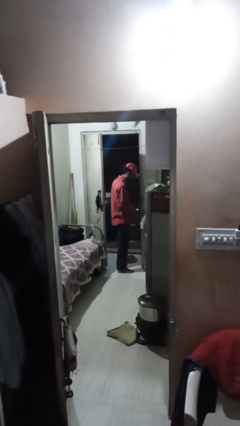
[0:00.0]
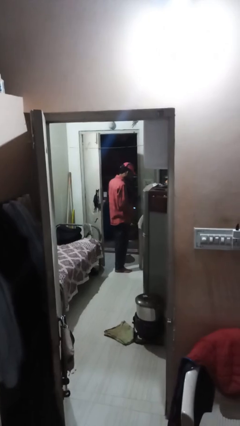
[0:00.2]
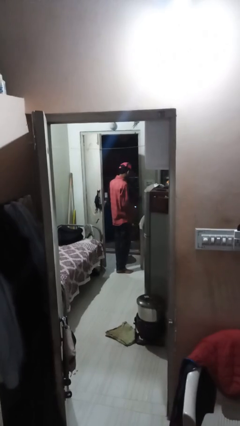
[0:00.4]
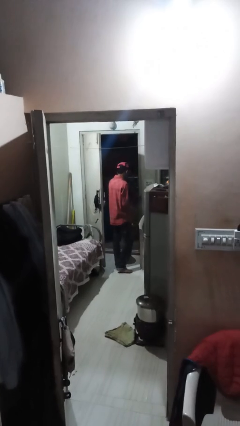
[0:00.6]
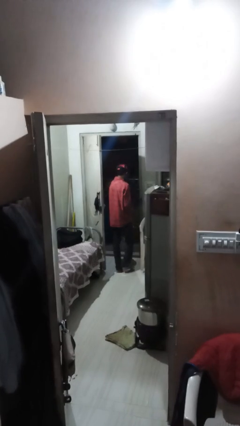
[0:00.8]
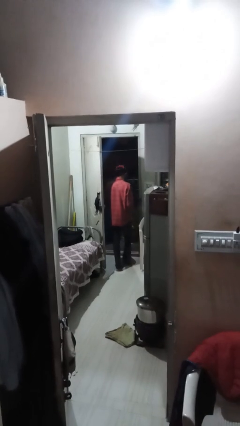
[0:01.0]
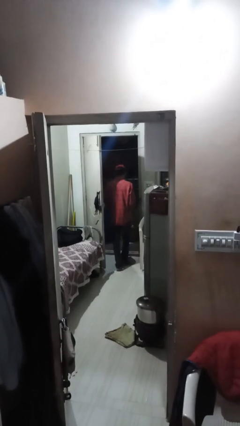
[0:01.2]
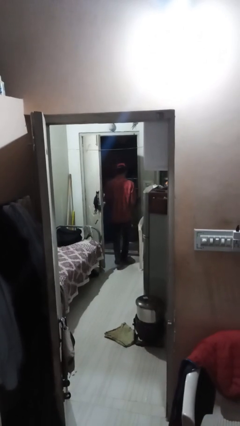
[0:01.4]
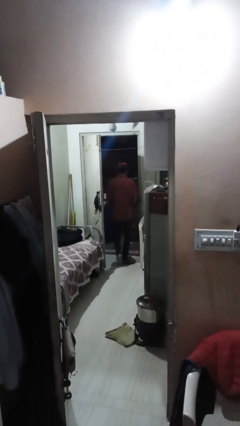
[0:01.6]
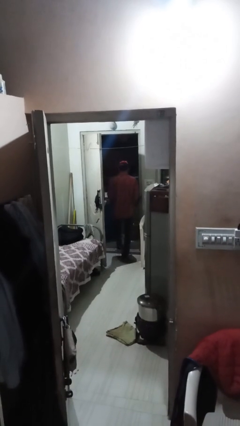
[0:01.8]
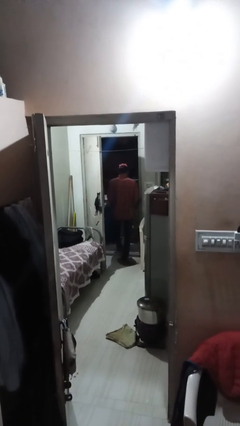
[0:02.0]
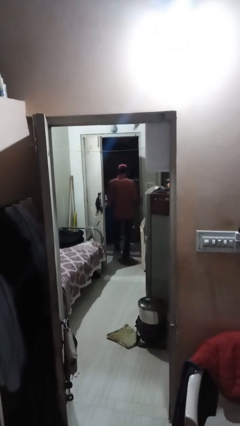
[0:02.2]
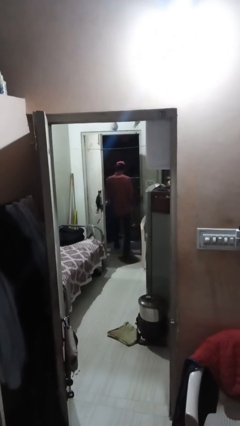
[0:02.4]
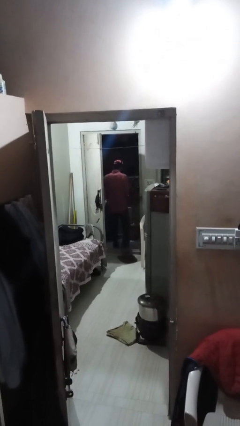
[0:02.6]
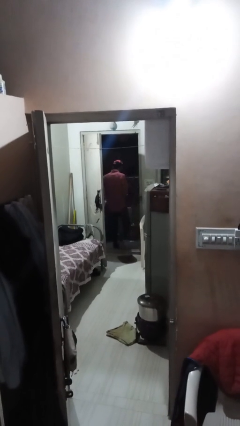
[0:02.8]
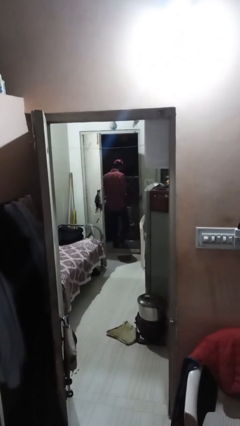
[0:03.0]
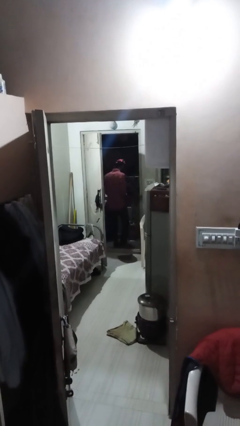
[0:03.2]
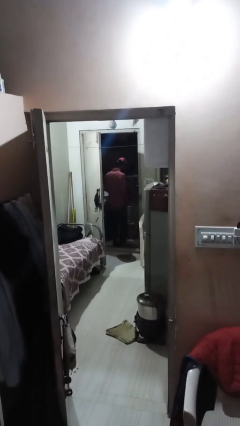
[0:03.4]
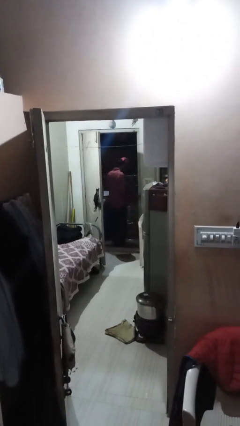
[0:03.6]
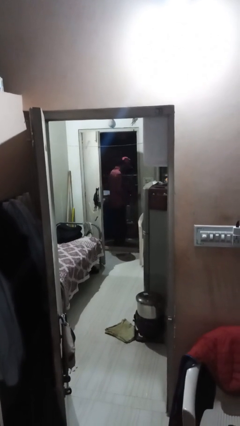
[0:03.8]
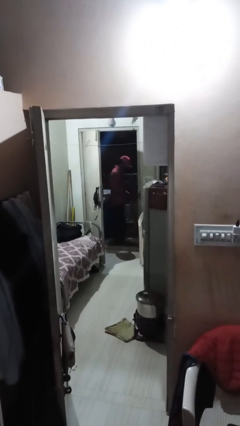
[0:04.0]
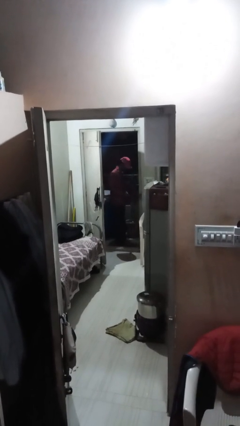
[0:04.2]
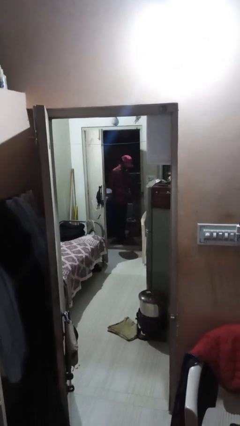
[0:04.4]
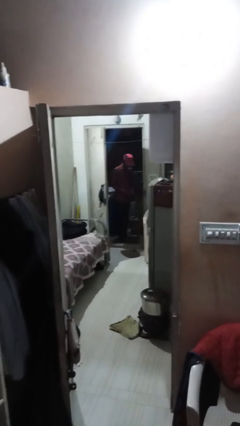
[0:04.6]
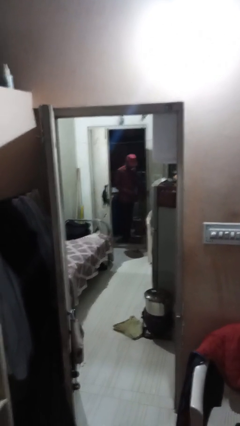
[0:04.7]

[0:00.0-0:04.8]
person exits scene through structure

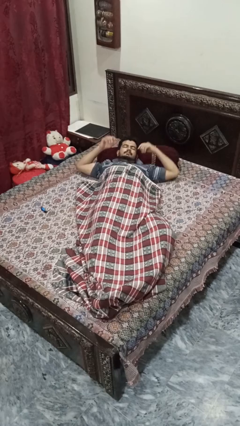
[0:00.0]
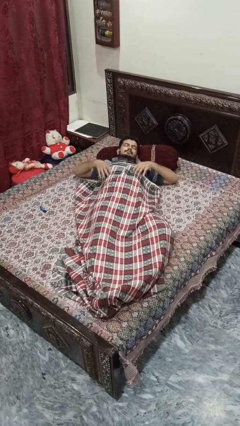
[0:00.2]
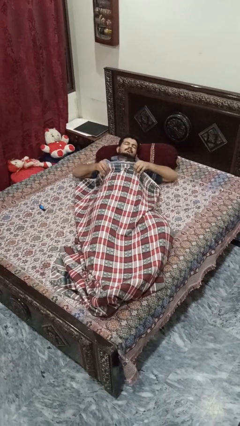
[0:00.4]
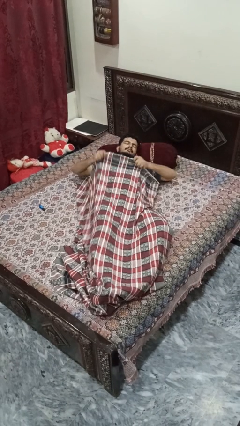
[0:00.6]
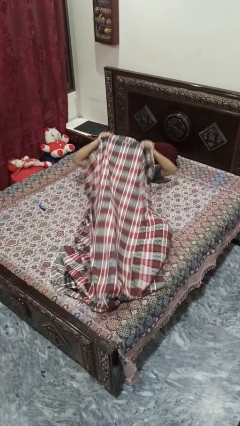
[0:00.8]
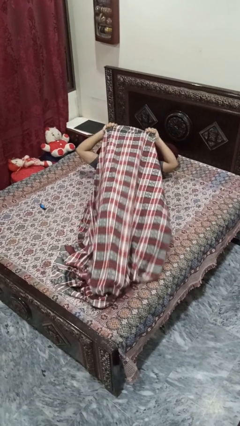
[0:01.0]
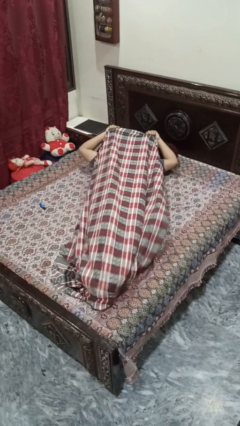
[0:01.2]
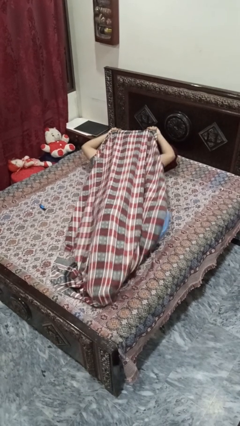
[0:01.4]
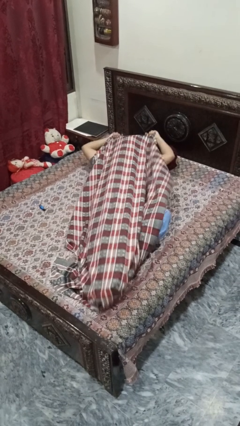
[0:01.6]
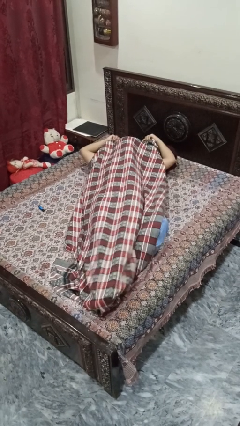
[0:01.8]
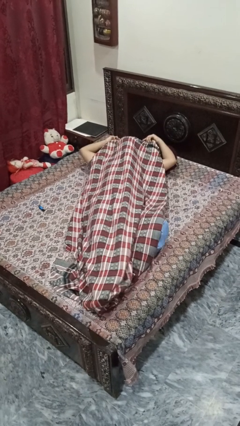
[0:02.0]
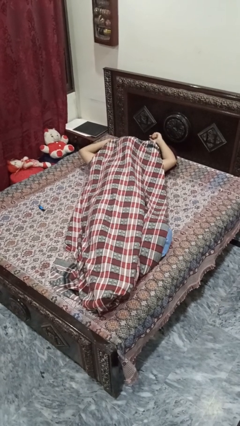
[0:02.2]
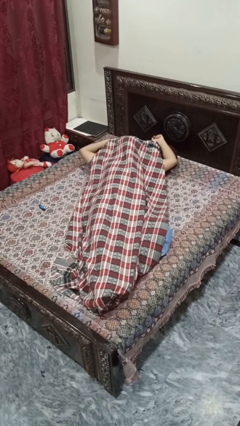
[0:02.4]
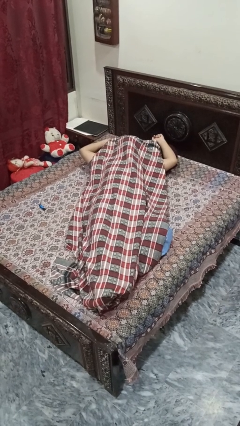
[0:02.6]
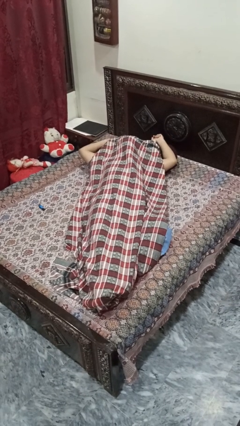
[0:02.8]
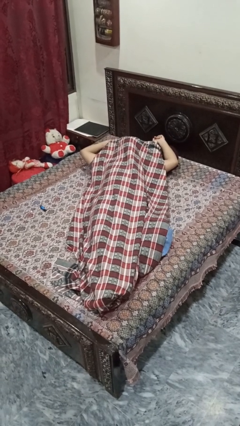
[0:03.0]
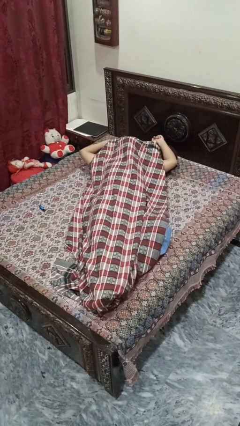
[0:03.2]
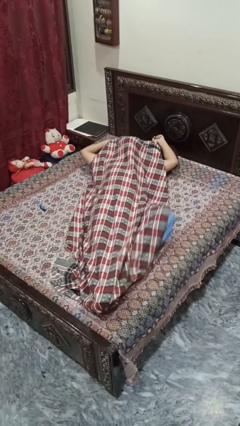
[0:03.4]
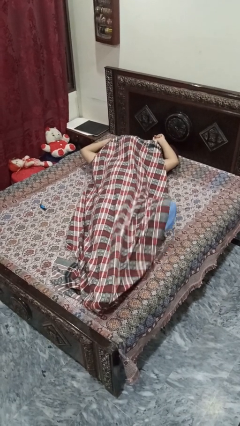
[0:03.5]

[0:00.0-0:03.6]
person covers with bedsheets

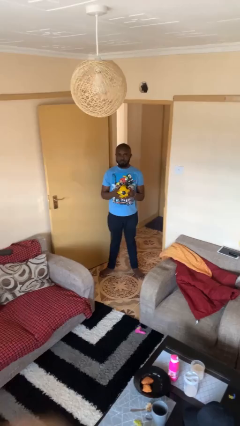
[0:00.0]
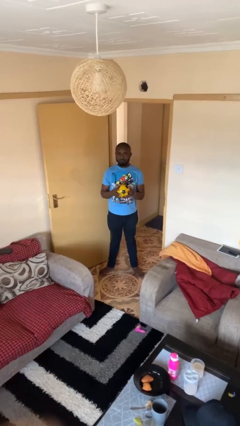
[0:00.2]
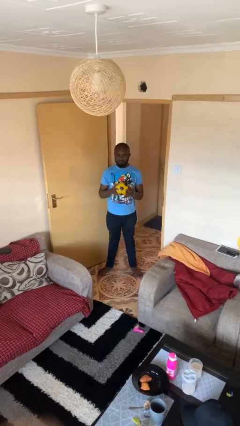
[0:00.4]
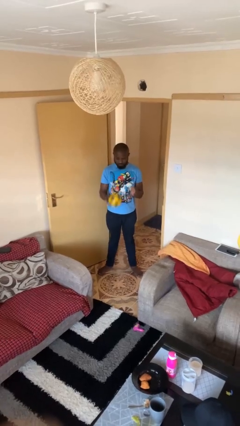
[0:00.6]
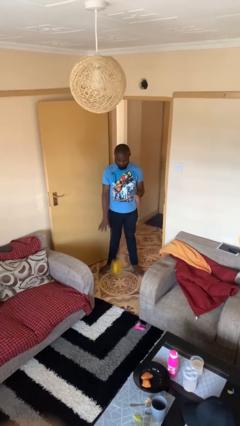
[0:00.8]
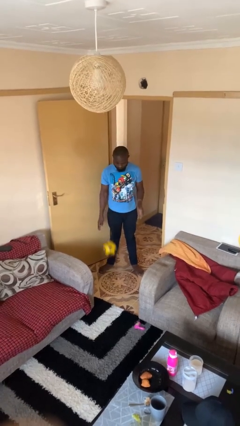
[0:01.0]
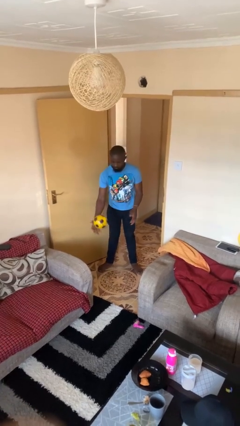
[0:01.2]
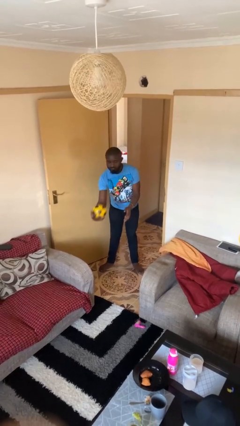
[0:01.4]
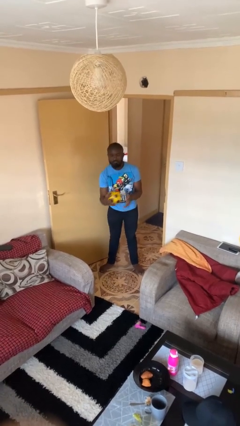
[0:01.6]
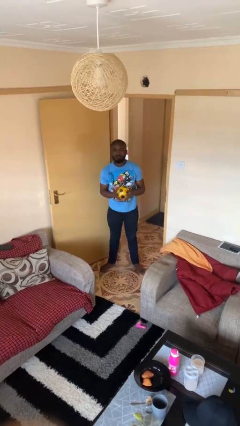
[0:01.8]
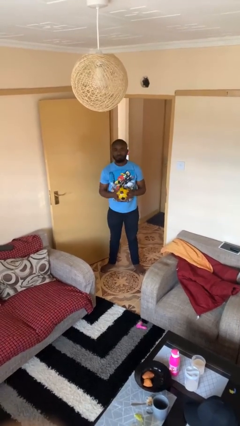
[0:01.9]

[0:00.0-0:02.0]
person bounces ball on floor

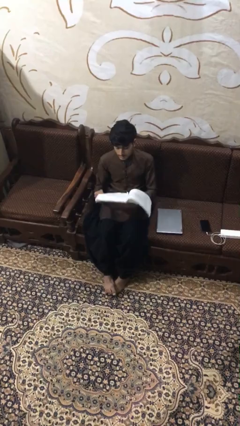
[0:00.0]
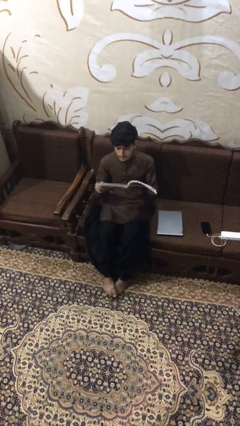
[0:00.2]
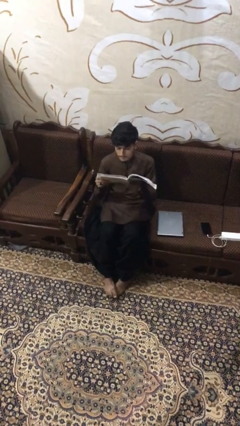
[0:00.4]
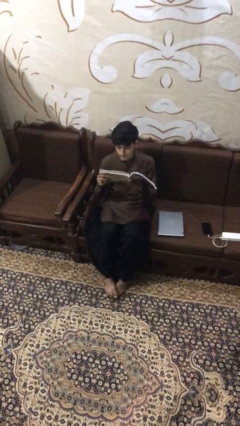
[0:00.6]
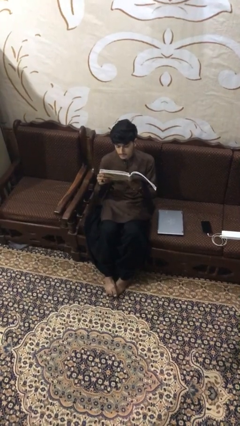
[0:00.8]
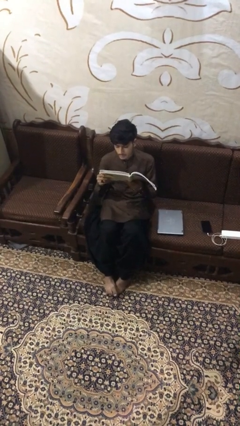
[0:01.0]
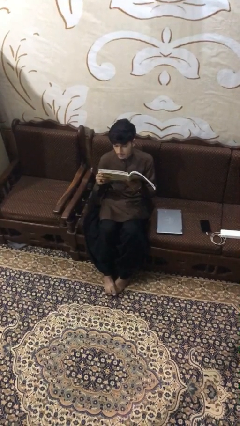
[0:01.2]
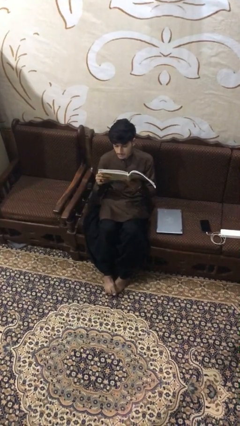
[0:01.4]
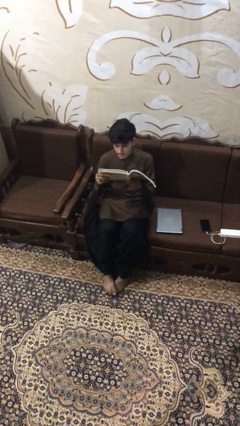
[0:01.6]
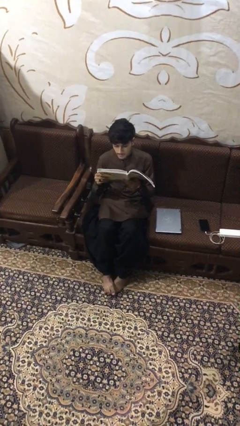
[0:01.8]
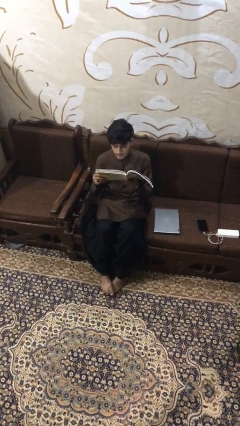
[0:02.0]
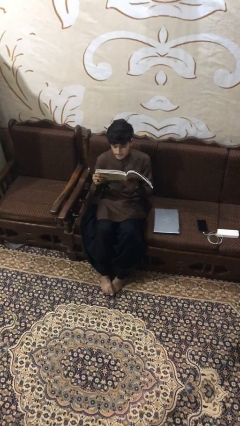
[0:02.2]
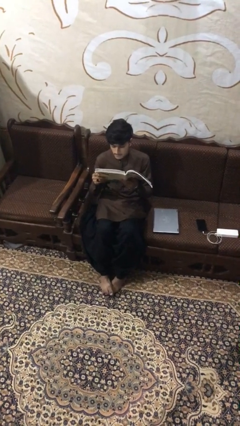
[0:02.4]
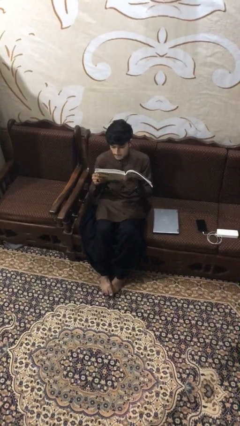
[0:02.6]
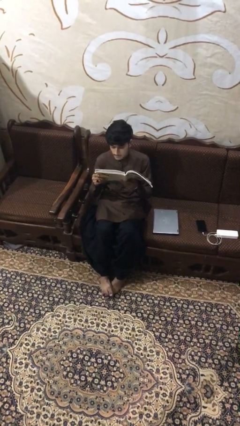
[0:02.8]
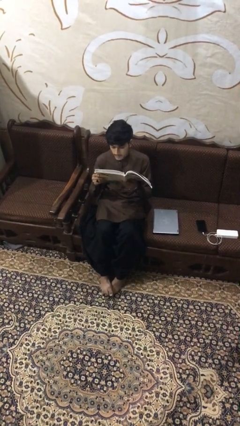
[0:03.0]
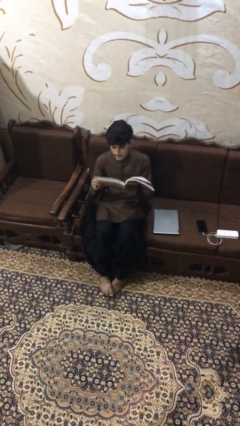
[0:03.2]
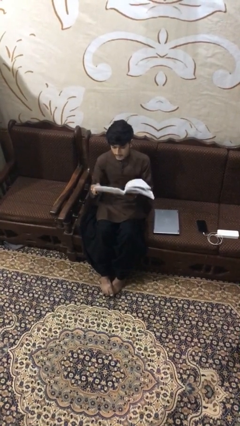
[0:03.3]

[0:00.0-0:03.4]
person reads document

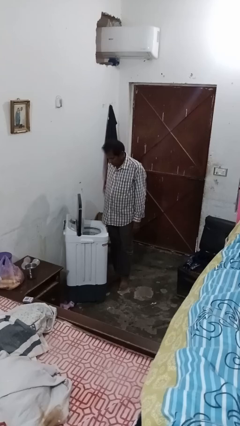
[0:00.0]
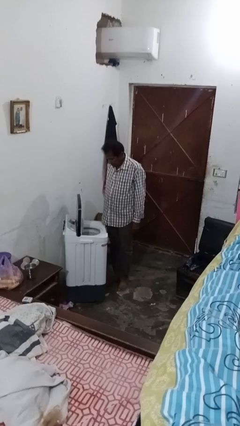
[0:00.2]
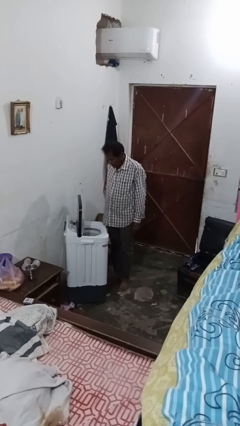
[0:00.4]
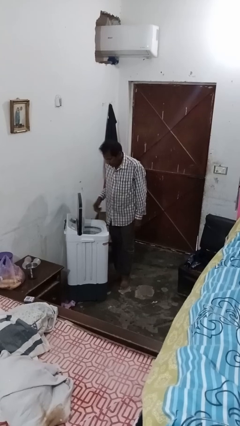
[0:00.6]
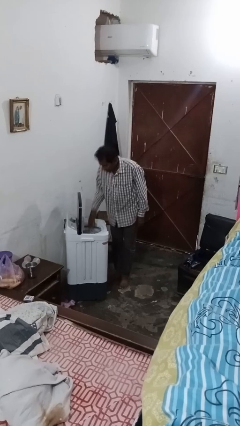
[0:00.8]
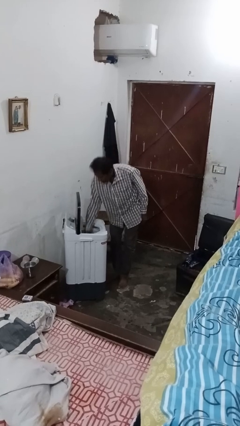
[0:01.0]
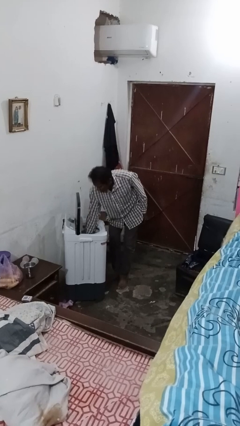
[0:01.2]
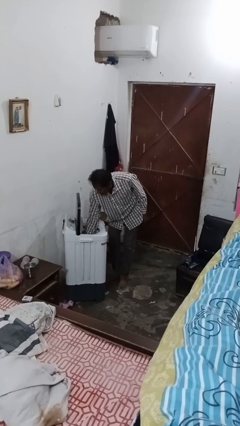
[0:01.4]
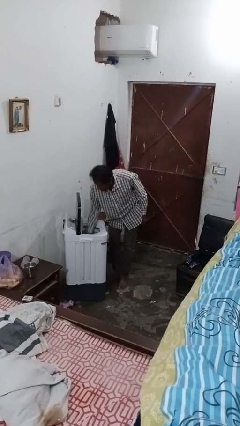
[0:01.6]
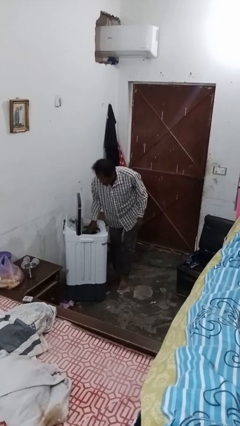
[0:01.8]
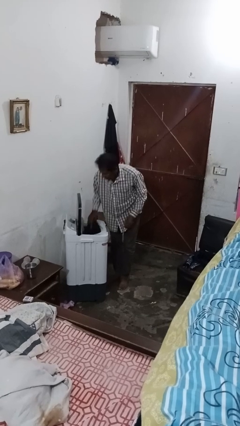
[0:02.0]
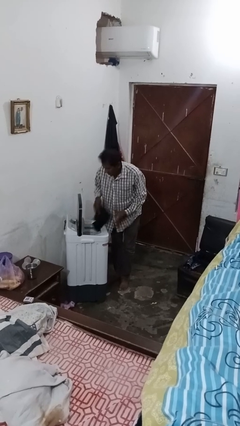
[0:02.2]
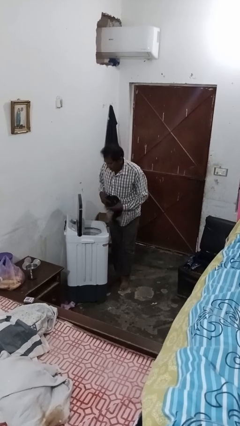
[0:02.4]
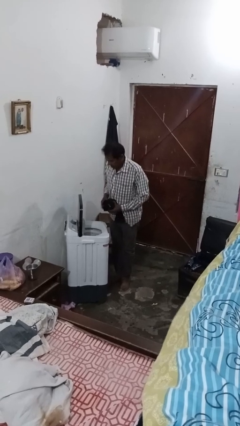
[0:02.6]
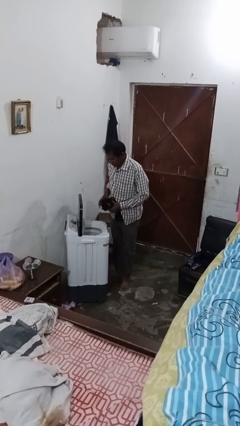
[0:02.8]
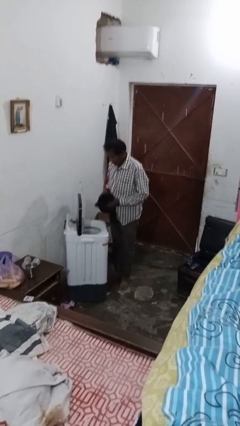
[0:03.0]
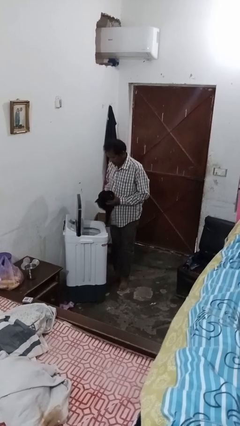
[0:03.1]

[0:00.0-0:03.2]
person unloads clotheswasher

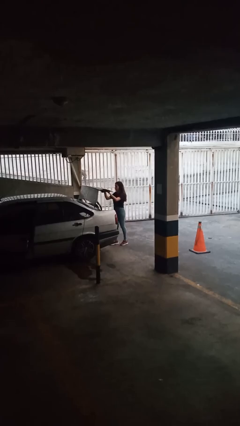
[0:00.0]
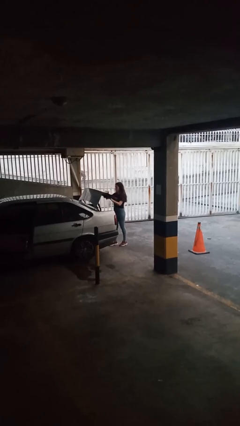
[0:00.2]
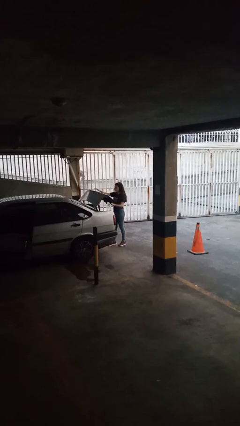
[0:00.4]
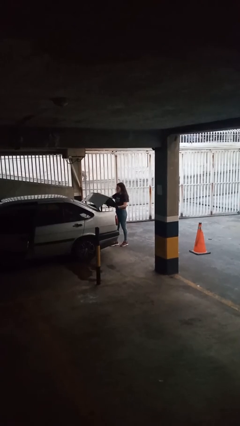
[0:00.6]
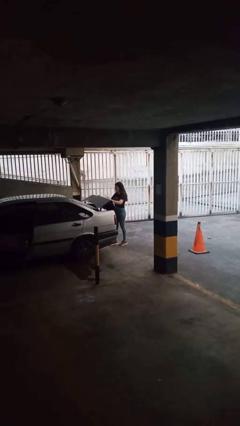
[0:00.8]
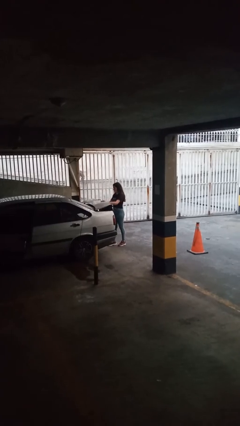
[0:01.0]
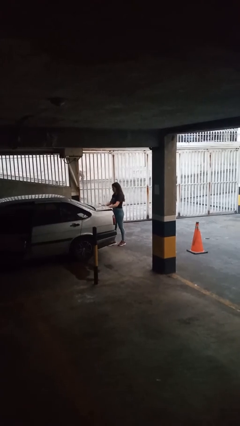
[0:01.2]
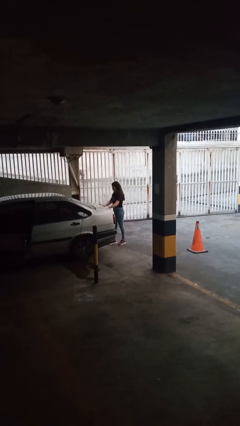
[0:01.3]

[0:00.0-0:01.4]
person closes car trunk
